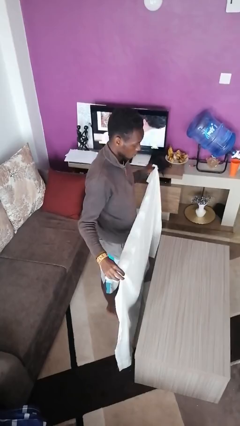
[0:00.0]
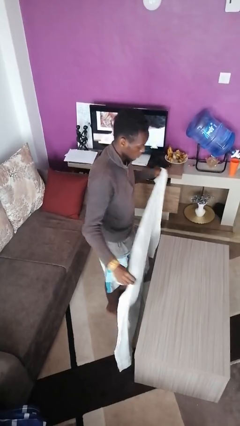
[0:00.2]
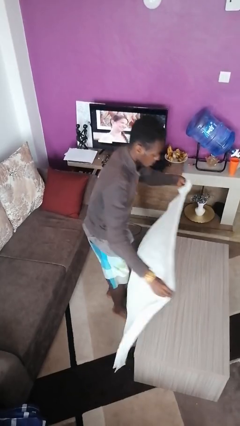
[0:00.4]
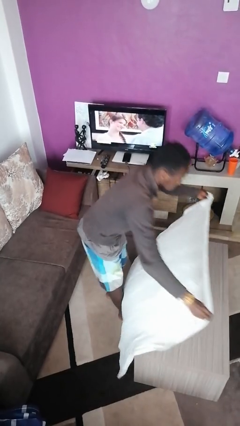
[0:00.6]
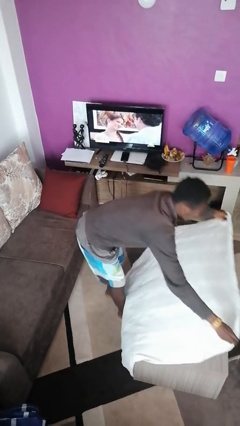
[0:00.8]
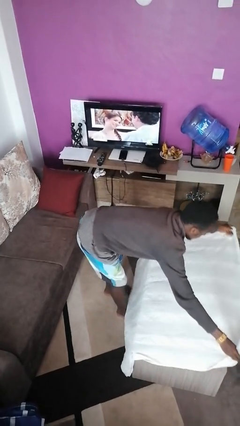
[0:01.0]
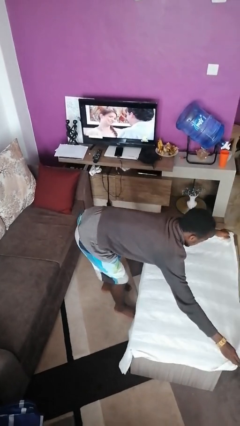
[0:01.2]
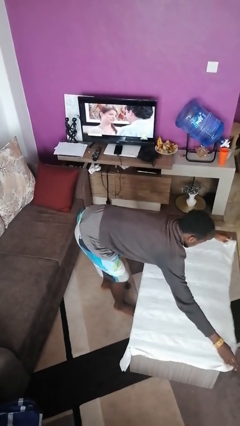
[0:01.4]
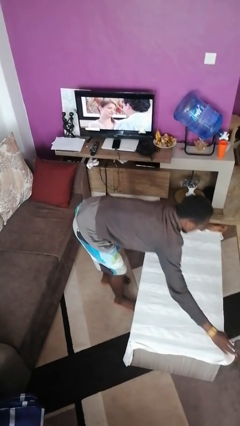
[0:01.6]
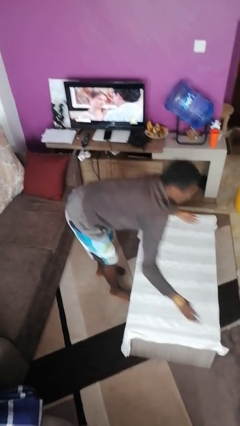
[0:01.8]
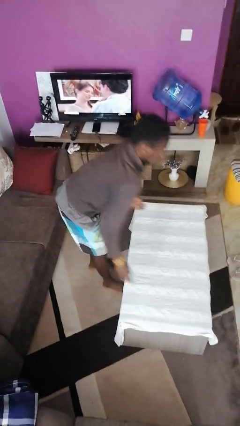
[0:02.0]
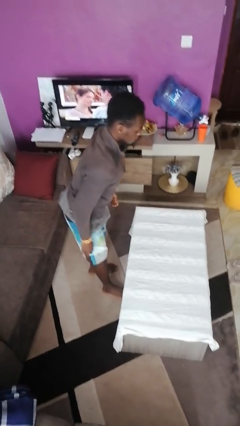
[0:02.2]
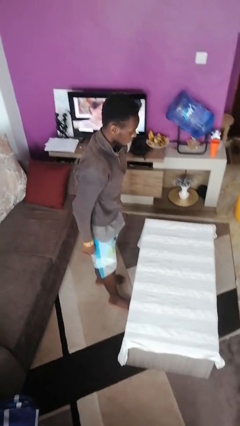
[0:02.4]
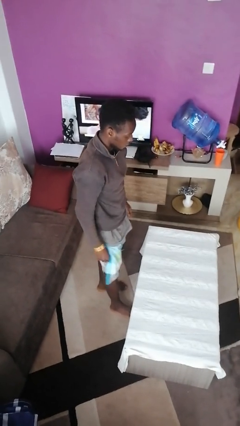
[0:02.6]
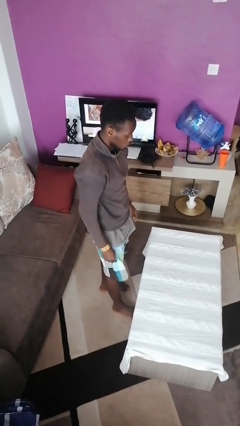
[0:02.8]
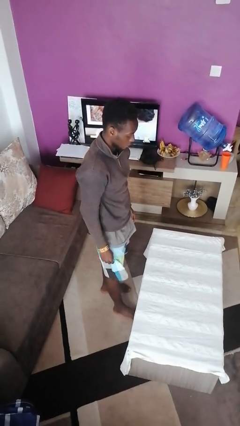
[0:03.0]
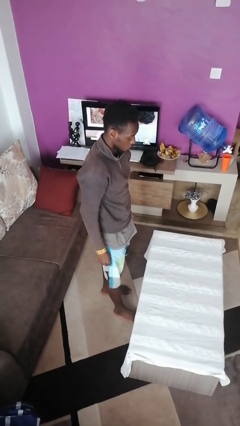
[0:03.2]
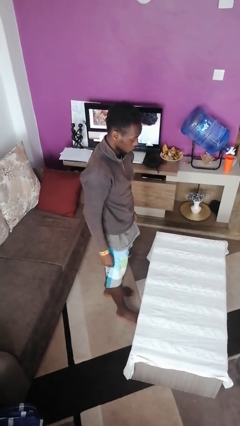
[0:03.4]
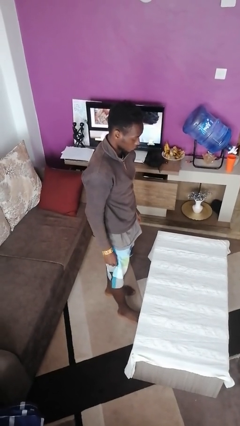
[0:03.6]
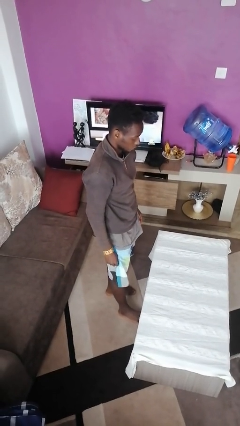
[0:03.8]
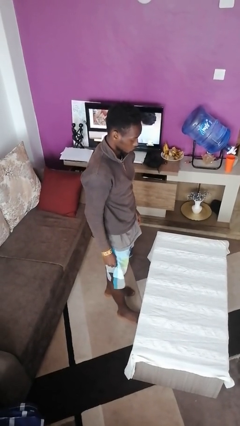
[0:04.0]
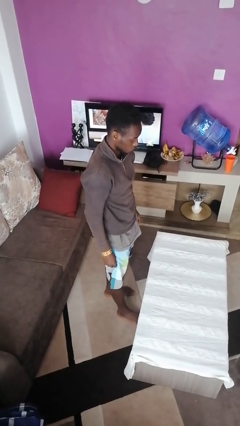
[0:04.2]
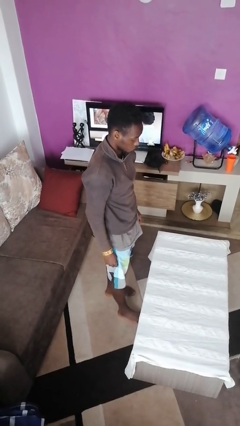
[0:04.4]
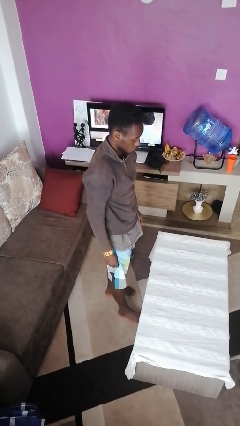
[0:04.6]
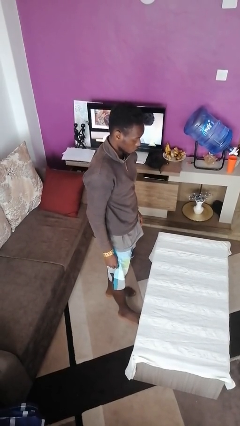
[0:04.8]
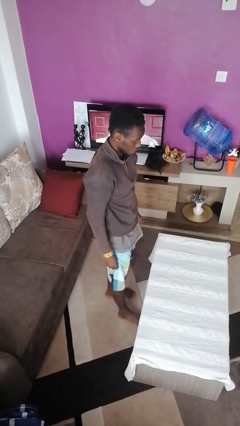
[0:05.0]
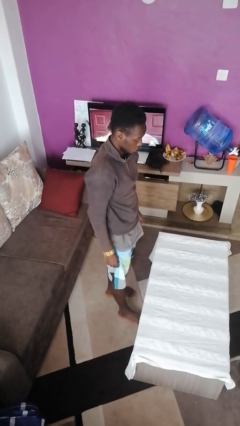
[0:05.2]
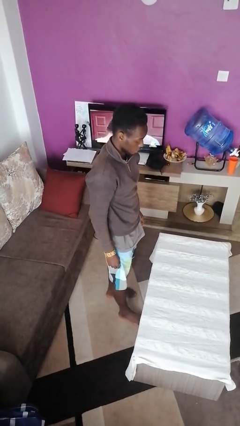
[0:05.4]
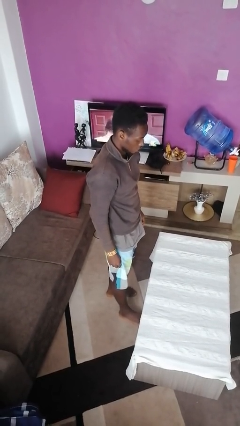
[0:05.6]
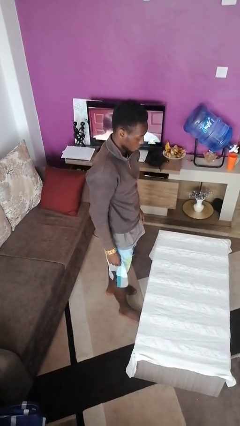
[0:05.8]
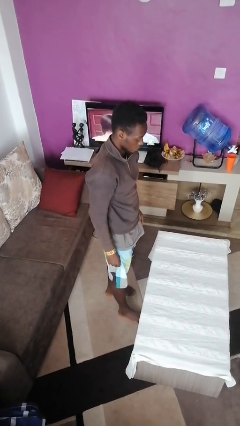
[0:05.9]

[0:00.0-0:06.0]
person spreads tablecloth

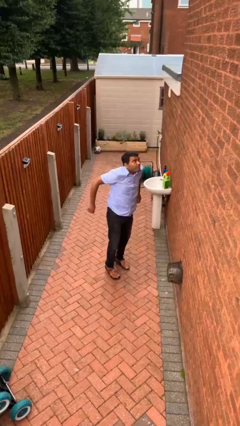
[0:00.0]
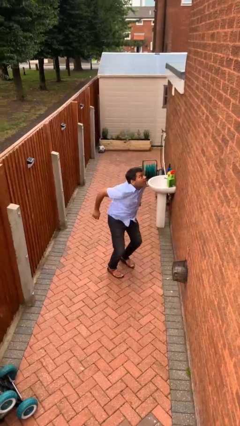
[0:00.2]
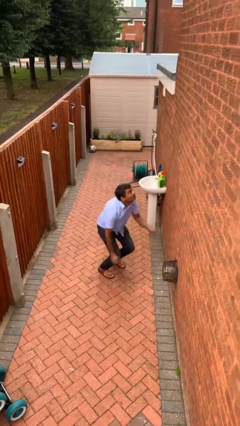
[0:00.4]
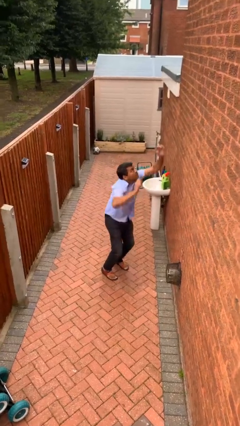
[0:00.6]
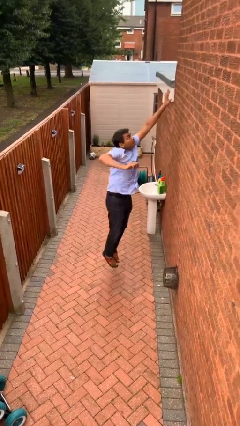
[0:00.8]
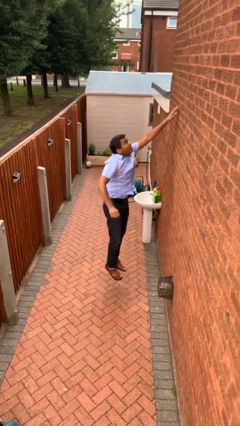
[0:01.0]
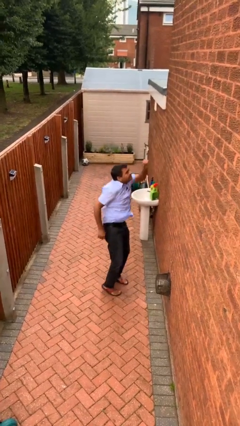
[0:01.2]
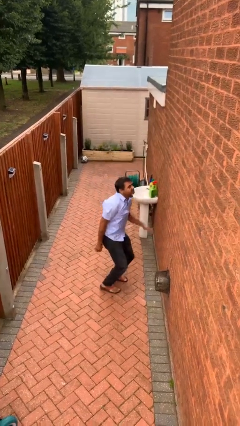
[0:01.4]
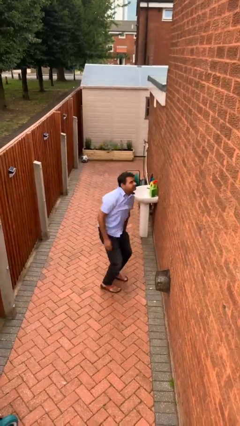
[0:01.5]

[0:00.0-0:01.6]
person jumps

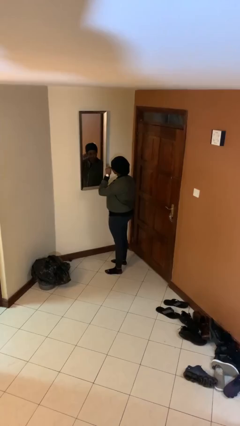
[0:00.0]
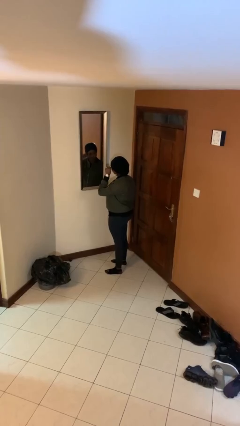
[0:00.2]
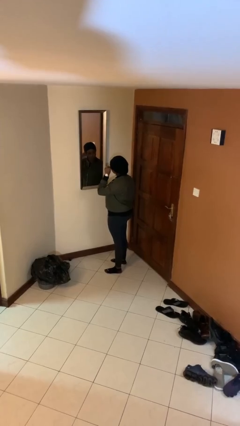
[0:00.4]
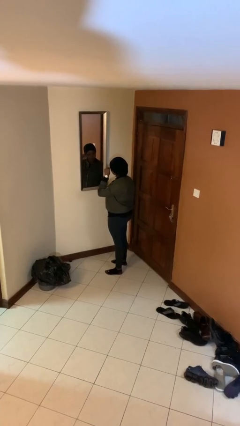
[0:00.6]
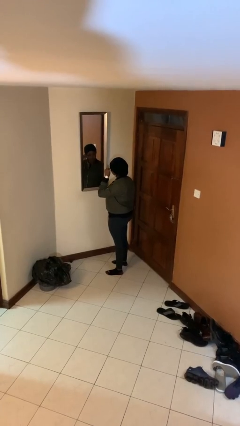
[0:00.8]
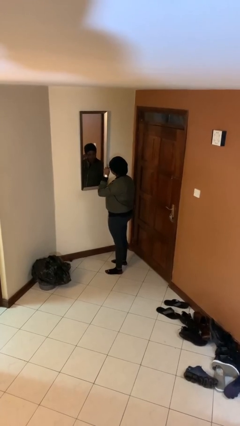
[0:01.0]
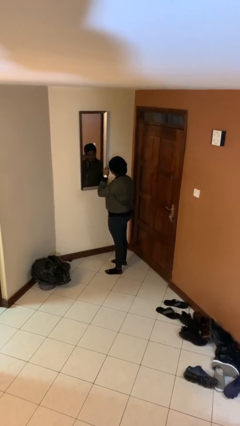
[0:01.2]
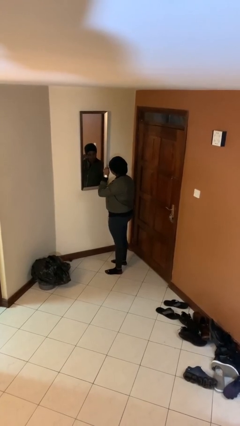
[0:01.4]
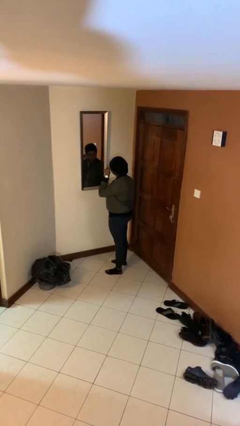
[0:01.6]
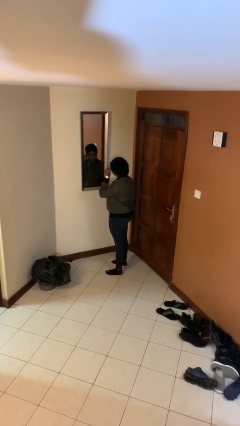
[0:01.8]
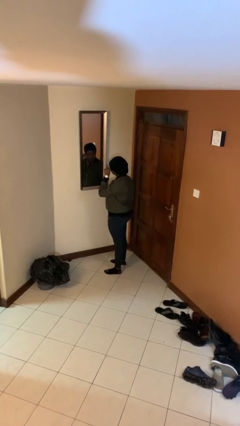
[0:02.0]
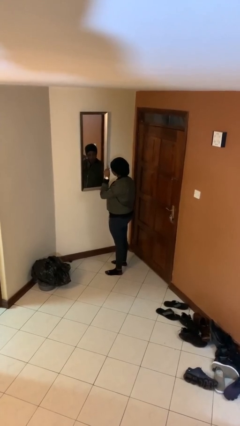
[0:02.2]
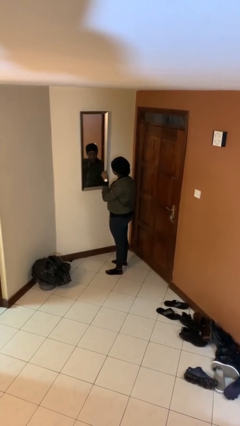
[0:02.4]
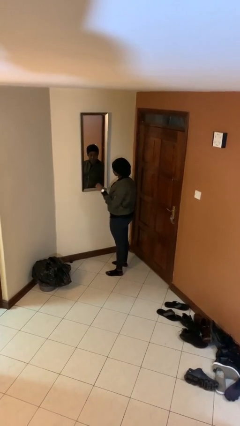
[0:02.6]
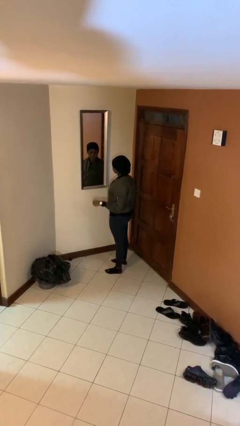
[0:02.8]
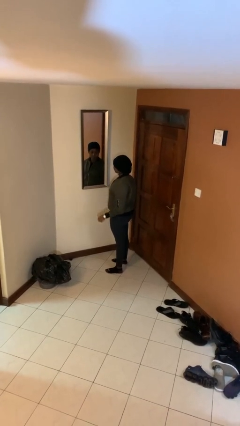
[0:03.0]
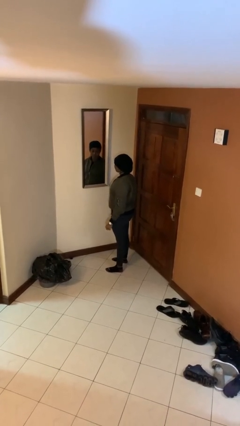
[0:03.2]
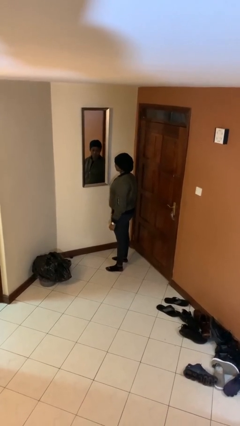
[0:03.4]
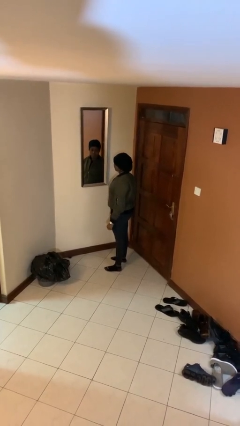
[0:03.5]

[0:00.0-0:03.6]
person applies eye makeup

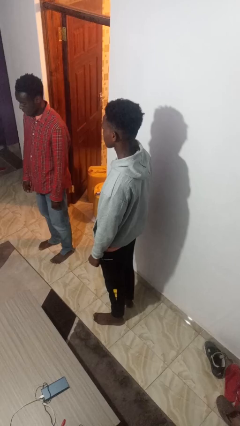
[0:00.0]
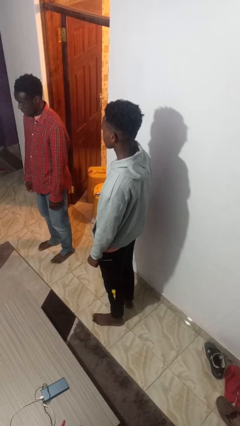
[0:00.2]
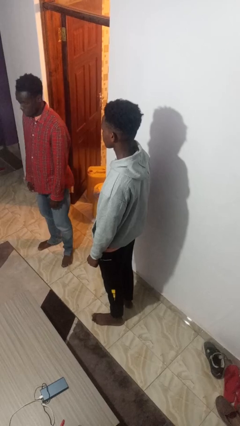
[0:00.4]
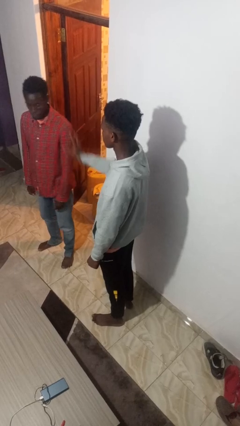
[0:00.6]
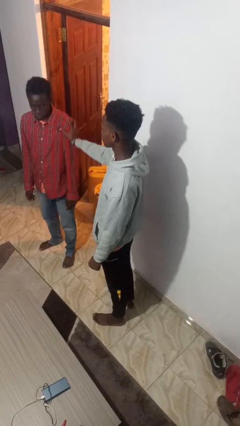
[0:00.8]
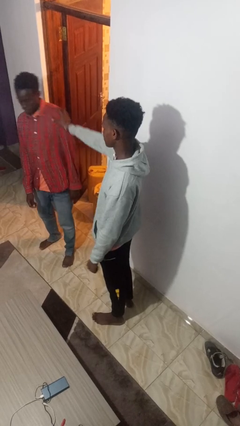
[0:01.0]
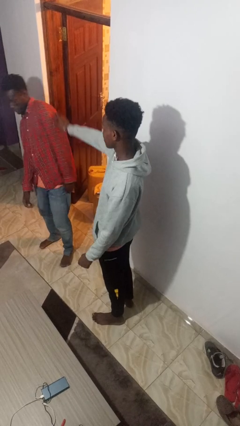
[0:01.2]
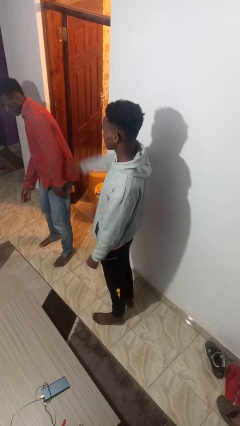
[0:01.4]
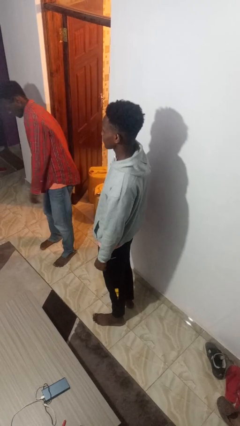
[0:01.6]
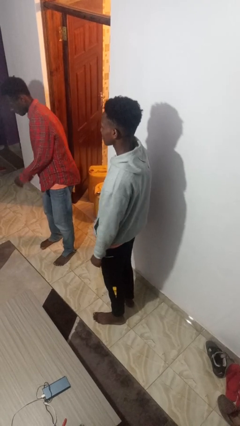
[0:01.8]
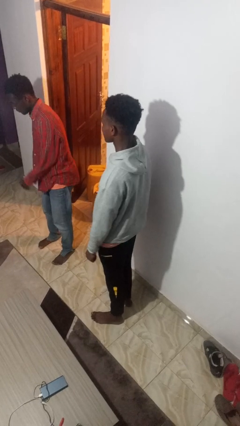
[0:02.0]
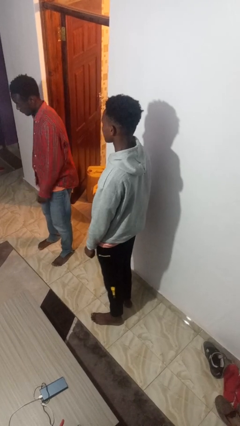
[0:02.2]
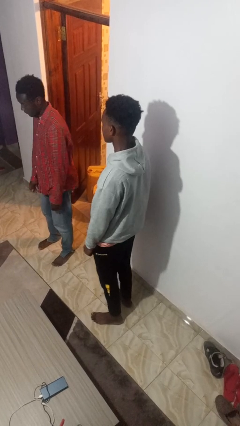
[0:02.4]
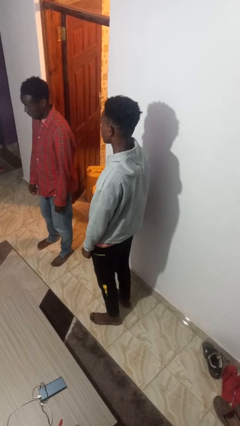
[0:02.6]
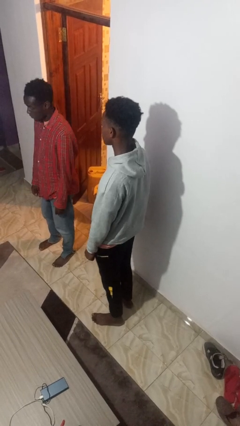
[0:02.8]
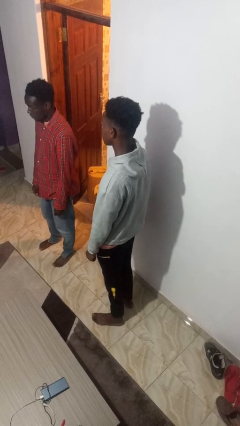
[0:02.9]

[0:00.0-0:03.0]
person shoves person

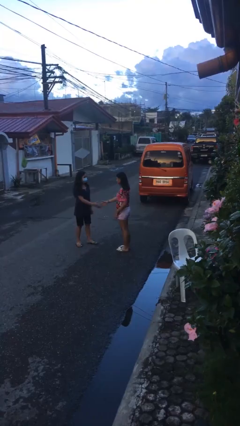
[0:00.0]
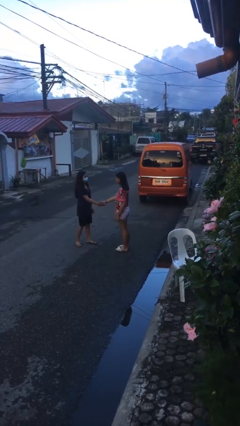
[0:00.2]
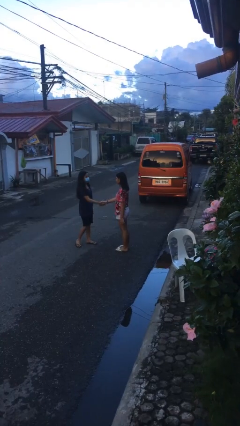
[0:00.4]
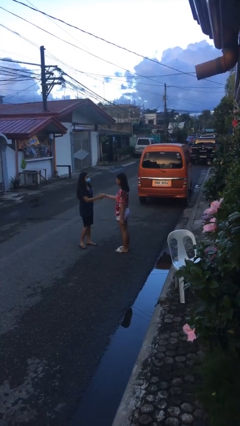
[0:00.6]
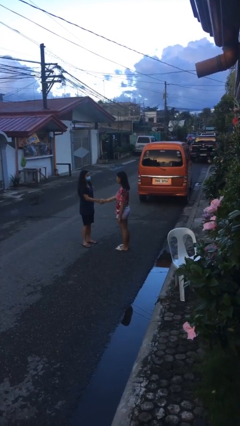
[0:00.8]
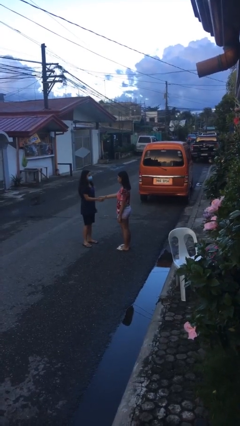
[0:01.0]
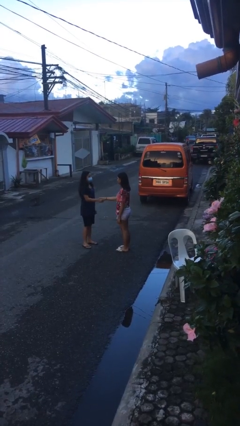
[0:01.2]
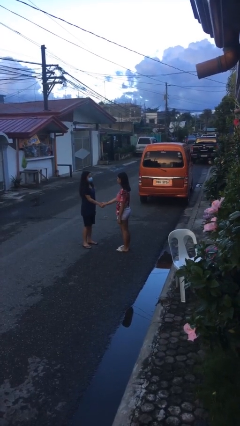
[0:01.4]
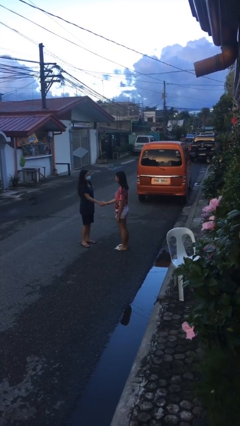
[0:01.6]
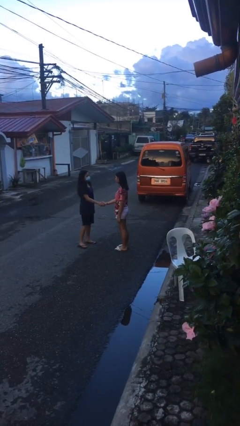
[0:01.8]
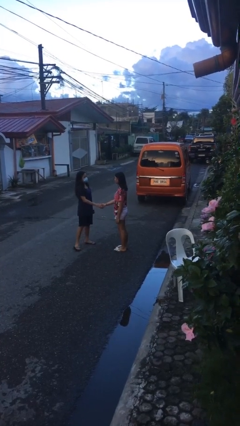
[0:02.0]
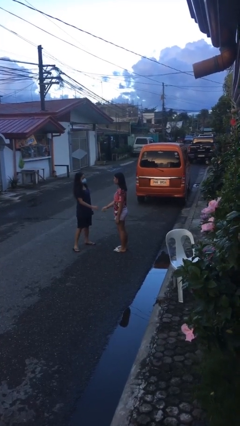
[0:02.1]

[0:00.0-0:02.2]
person shakes hand

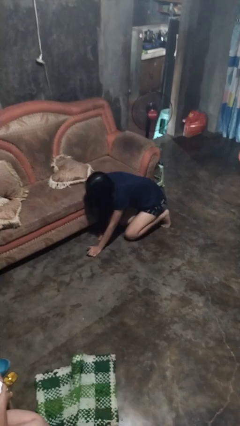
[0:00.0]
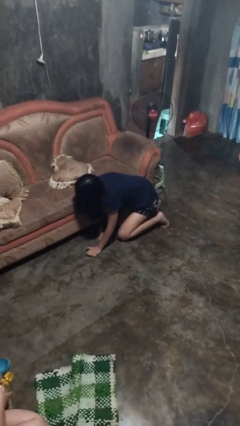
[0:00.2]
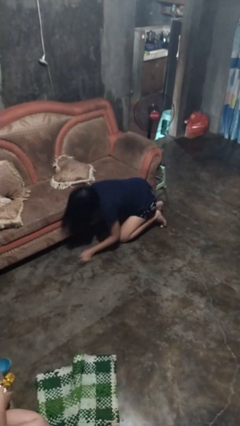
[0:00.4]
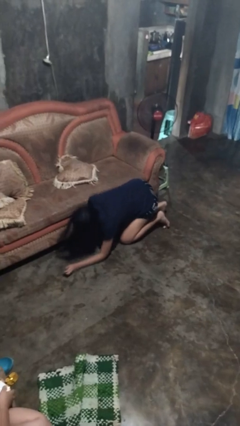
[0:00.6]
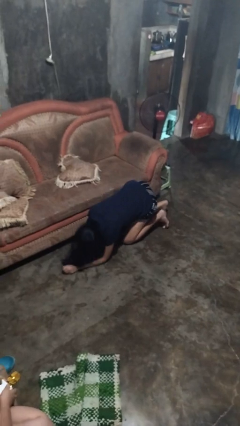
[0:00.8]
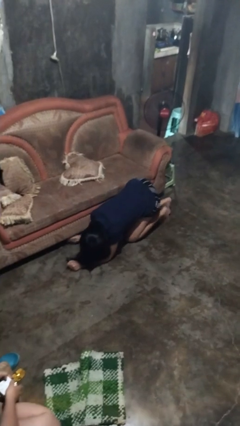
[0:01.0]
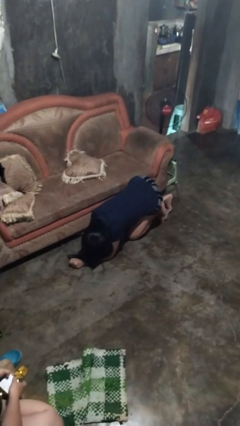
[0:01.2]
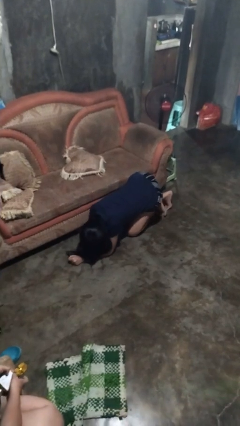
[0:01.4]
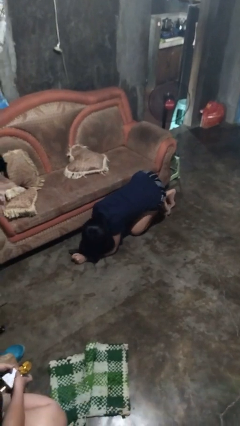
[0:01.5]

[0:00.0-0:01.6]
person searches under couch
